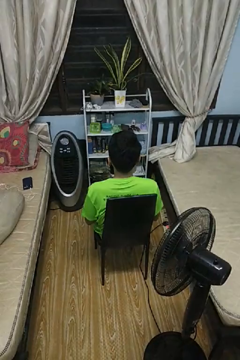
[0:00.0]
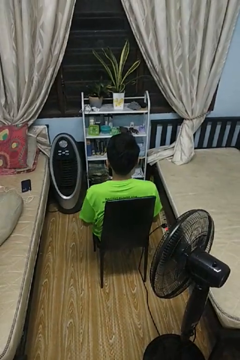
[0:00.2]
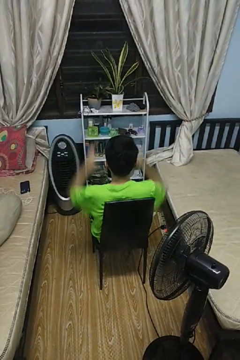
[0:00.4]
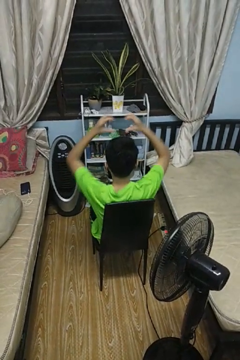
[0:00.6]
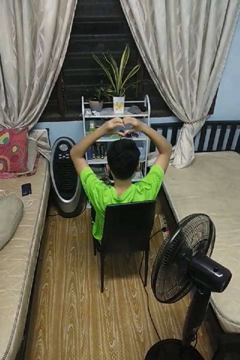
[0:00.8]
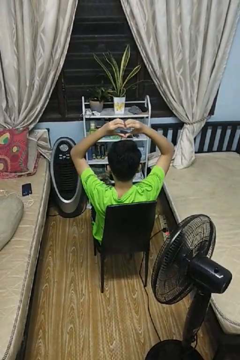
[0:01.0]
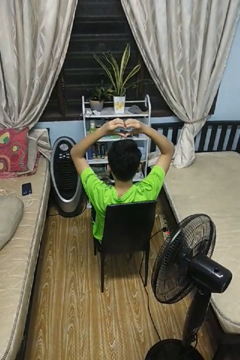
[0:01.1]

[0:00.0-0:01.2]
person gestures heart

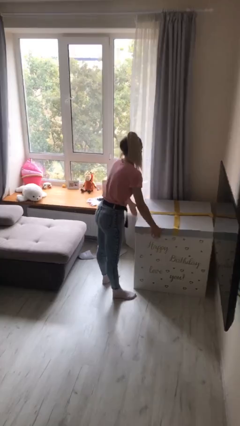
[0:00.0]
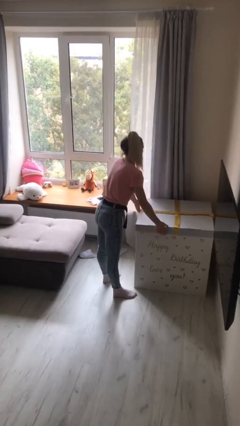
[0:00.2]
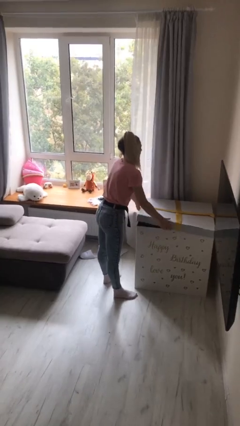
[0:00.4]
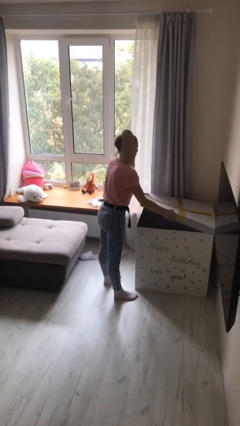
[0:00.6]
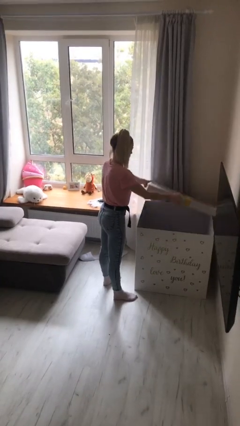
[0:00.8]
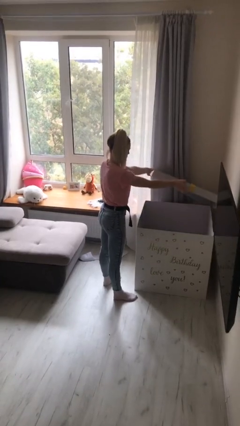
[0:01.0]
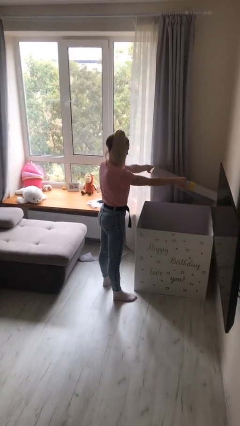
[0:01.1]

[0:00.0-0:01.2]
person opens box

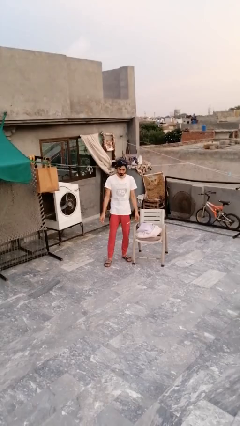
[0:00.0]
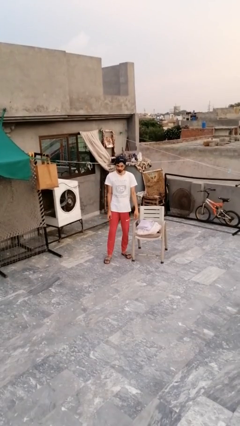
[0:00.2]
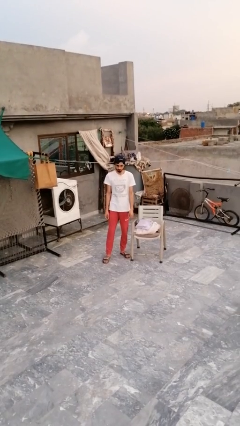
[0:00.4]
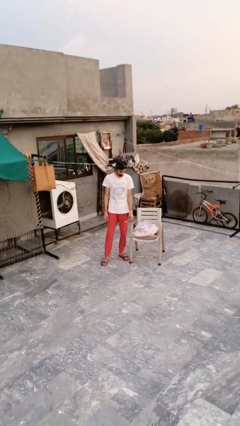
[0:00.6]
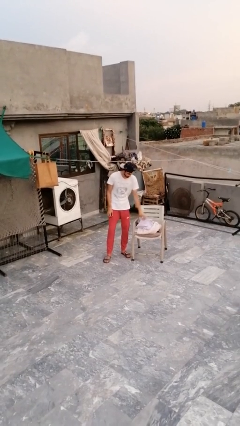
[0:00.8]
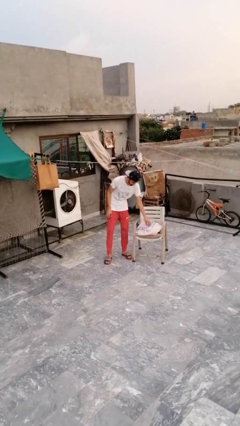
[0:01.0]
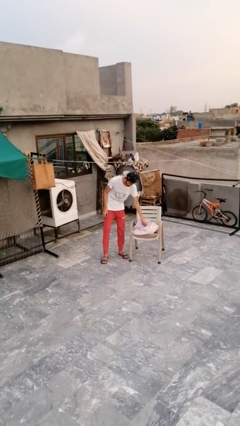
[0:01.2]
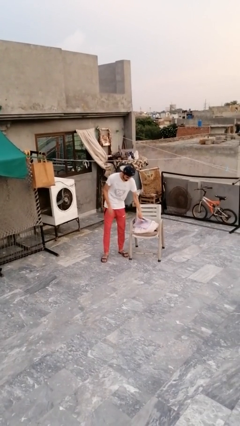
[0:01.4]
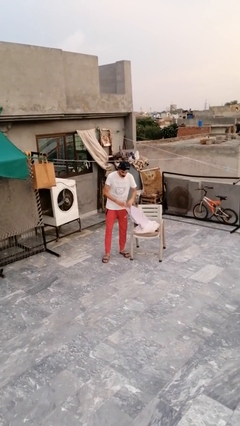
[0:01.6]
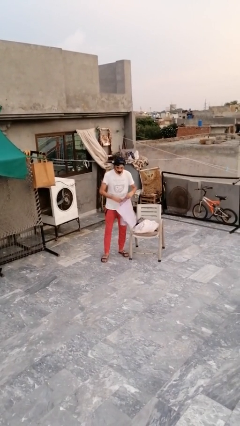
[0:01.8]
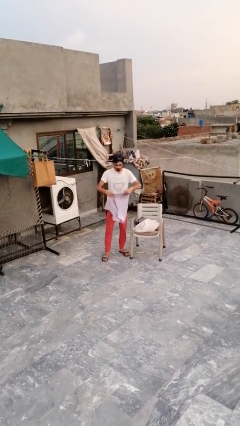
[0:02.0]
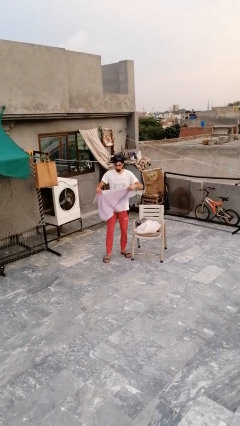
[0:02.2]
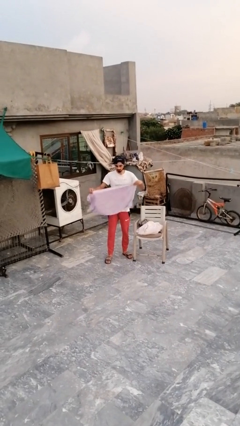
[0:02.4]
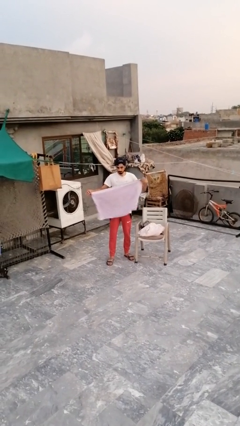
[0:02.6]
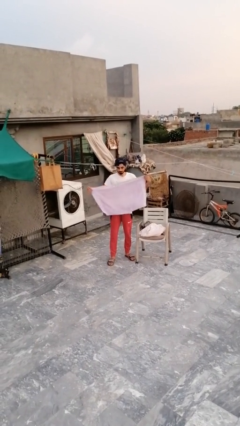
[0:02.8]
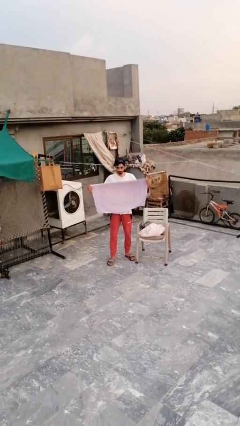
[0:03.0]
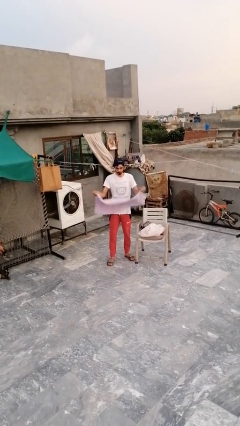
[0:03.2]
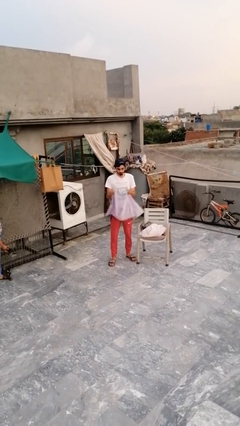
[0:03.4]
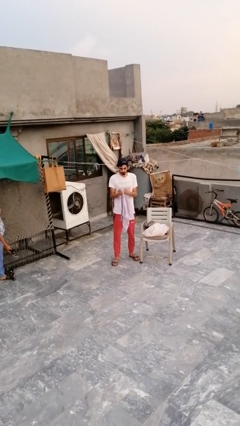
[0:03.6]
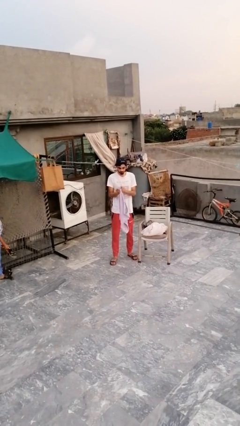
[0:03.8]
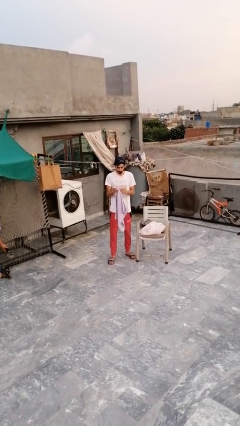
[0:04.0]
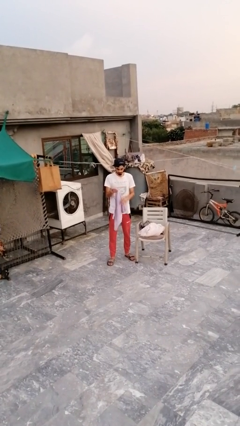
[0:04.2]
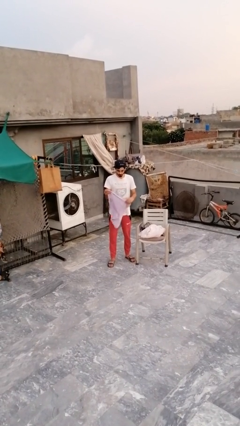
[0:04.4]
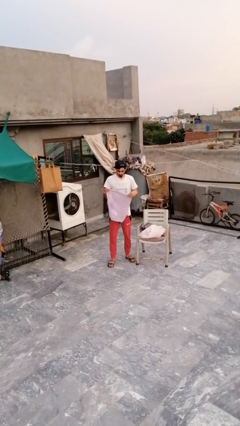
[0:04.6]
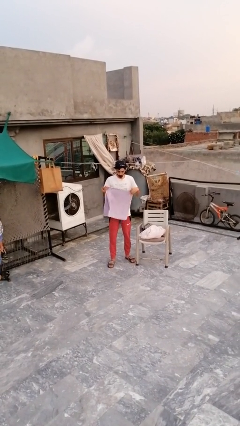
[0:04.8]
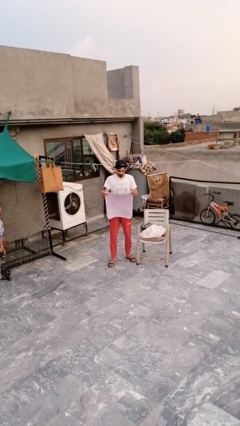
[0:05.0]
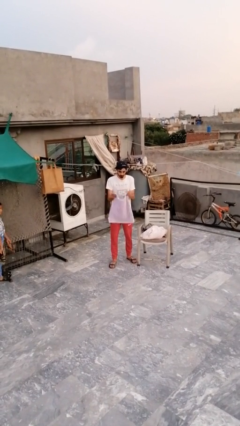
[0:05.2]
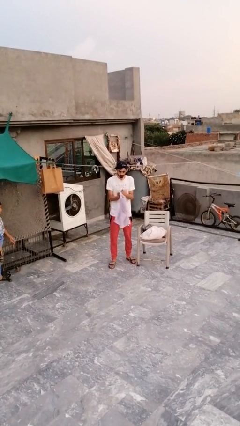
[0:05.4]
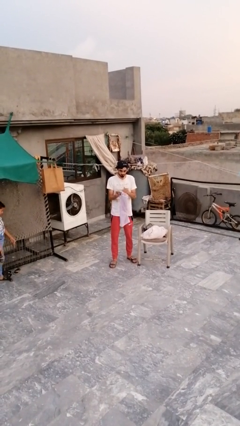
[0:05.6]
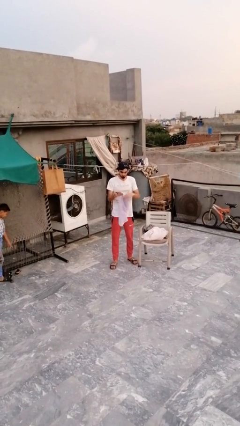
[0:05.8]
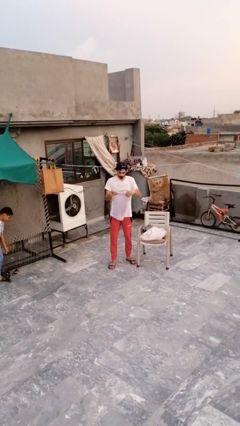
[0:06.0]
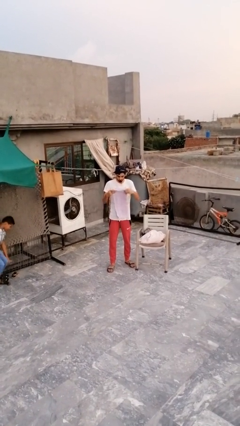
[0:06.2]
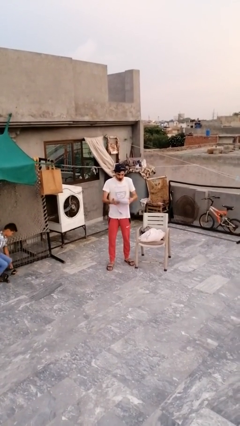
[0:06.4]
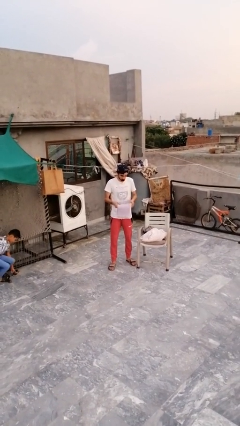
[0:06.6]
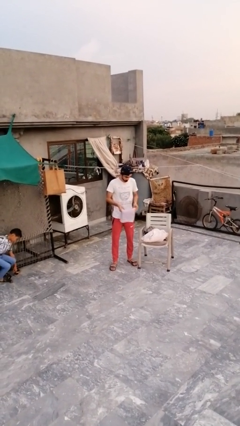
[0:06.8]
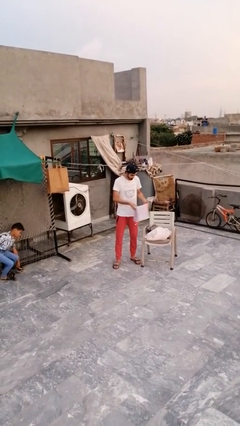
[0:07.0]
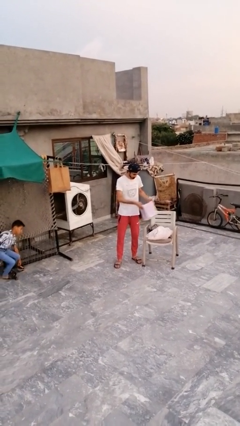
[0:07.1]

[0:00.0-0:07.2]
person folds towel

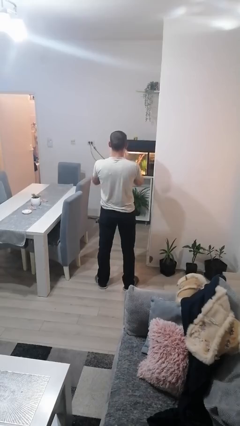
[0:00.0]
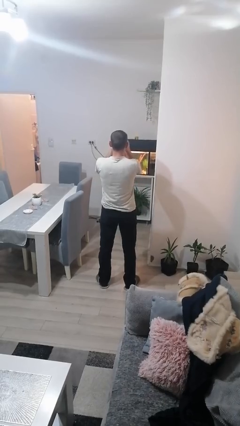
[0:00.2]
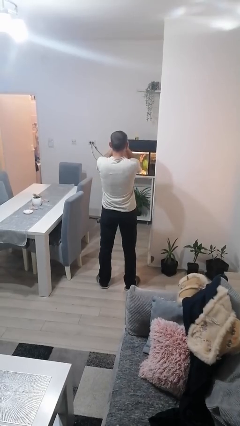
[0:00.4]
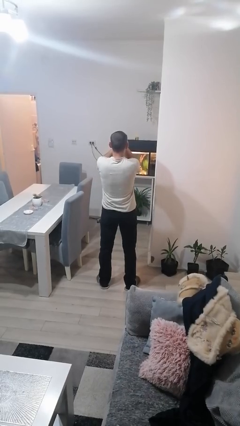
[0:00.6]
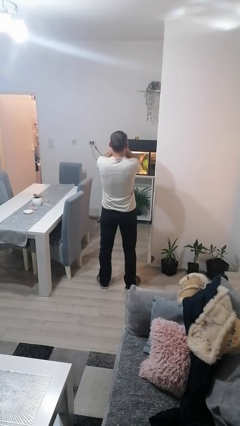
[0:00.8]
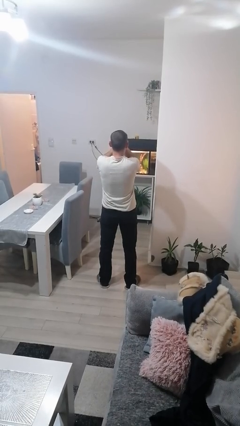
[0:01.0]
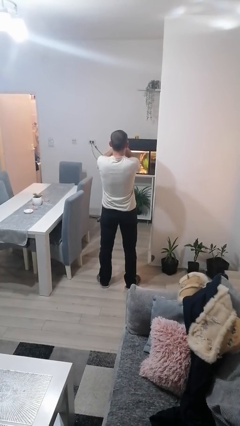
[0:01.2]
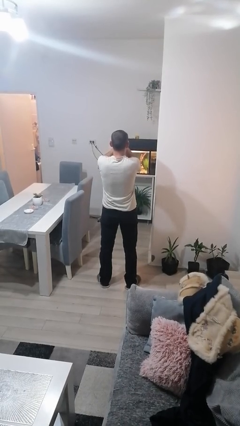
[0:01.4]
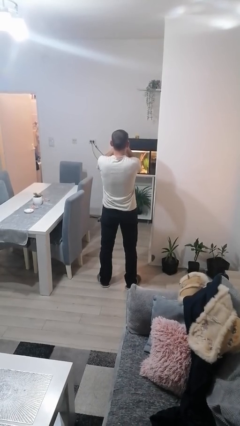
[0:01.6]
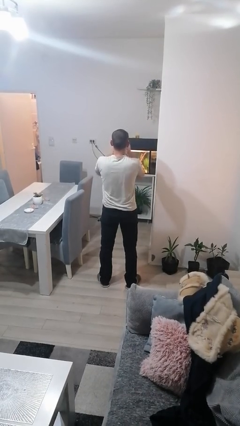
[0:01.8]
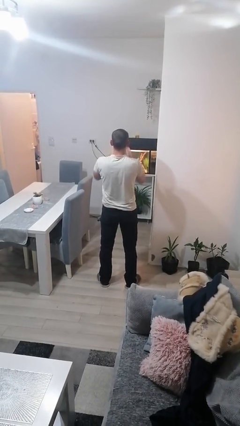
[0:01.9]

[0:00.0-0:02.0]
person covers face with hands

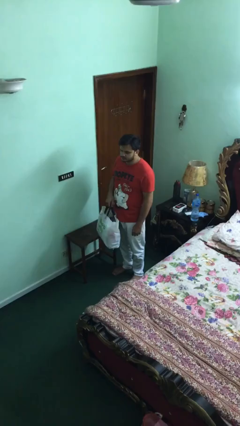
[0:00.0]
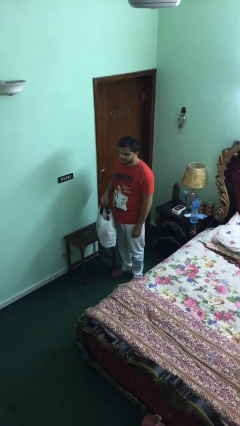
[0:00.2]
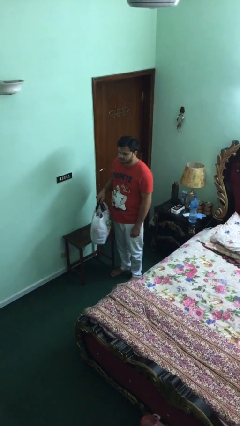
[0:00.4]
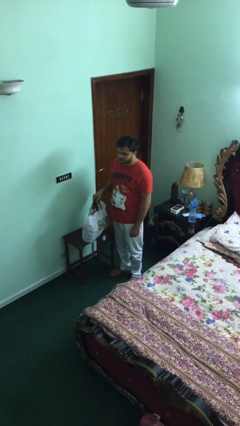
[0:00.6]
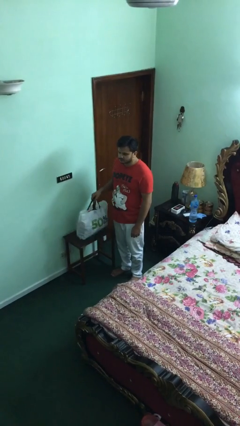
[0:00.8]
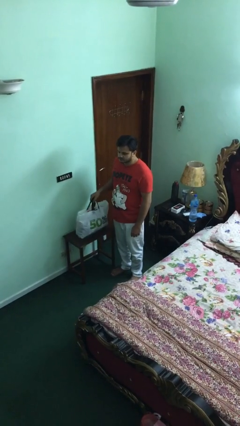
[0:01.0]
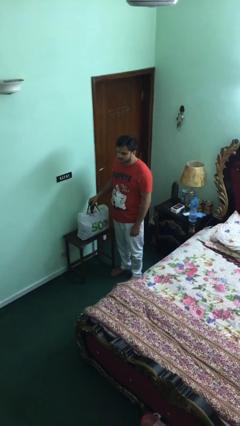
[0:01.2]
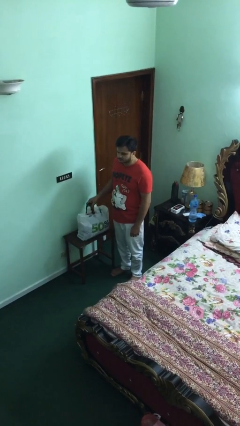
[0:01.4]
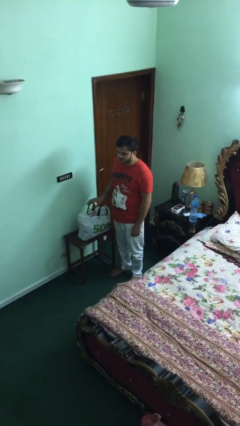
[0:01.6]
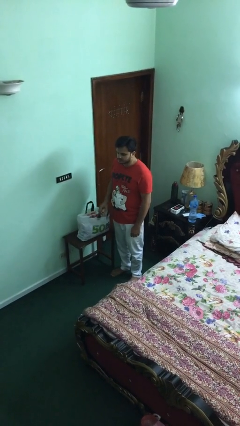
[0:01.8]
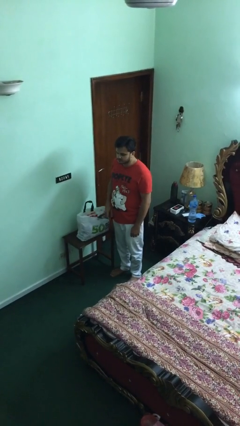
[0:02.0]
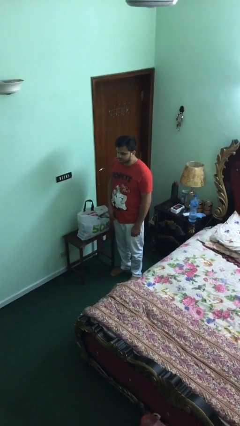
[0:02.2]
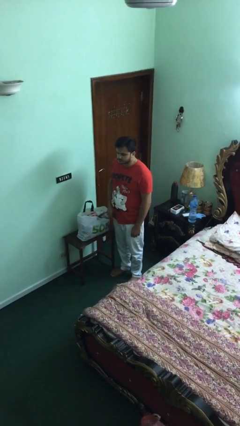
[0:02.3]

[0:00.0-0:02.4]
person puts down object on table

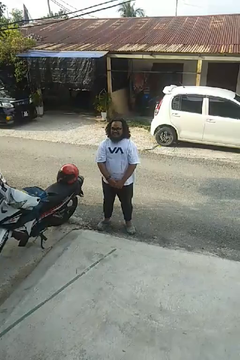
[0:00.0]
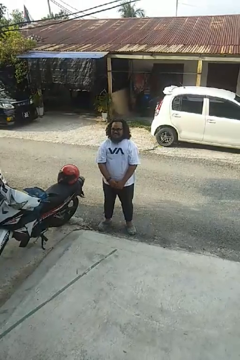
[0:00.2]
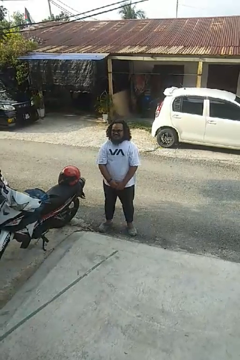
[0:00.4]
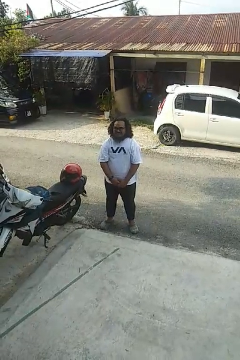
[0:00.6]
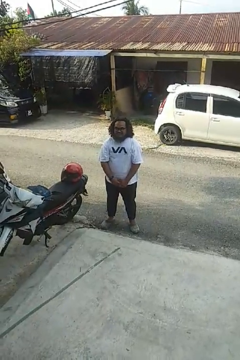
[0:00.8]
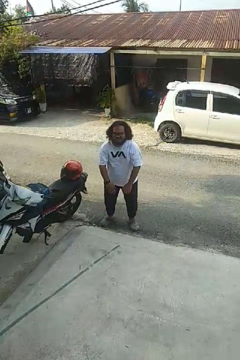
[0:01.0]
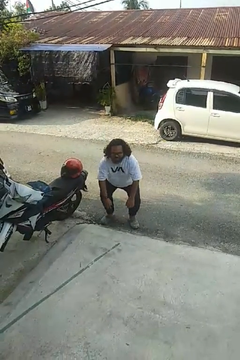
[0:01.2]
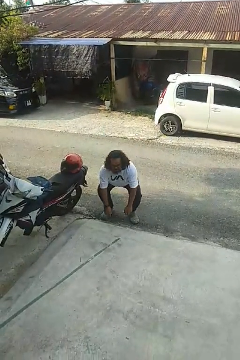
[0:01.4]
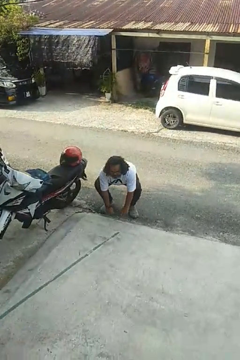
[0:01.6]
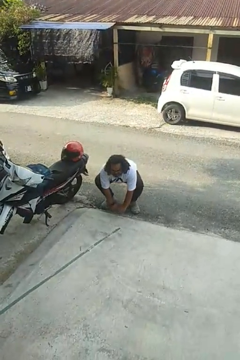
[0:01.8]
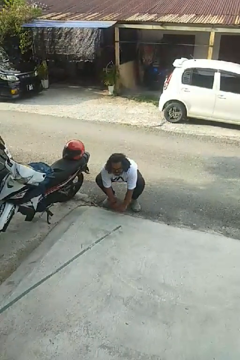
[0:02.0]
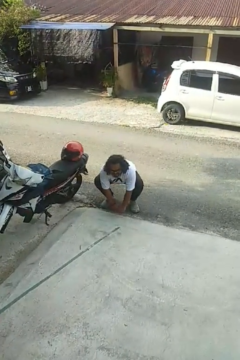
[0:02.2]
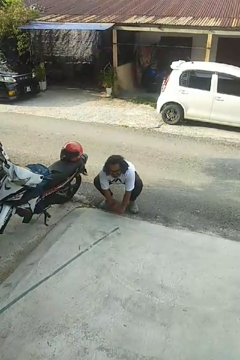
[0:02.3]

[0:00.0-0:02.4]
person squats

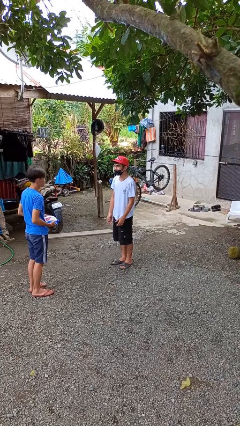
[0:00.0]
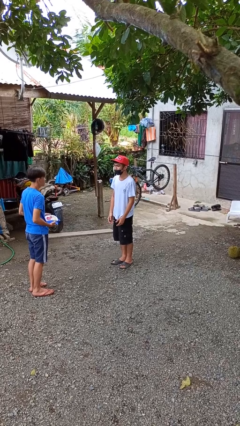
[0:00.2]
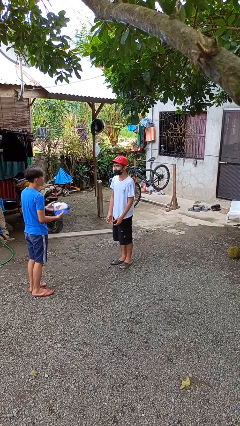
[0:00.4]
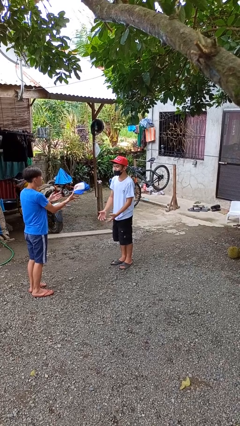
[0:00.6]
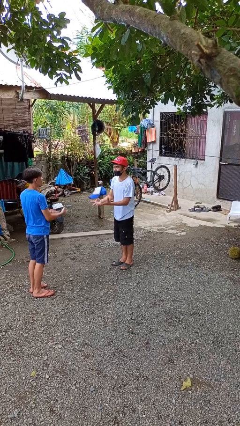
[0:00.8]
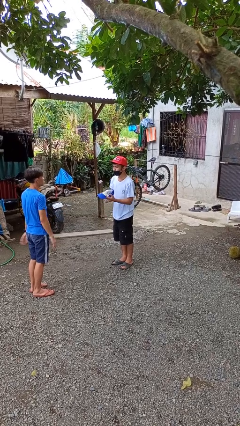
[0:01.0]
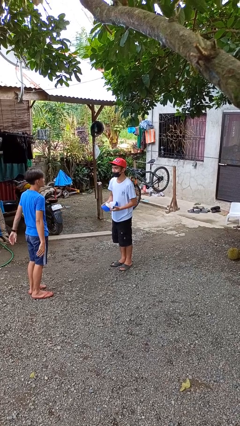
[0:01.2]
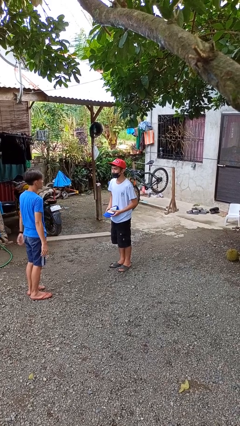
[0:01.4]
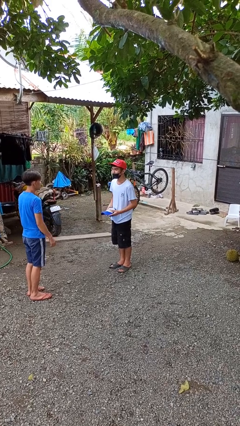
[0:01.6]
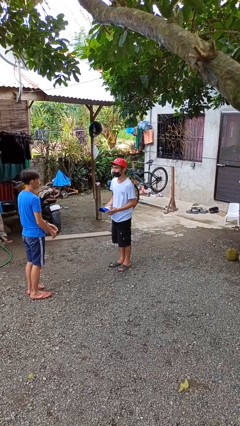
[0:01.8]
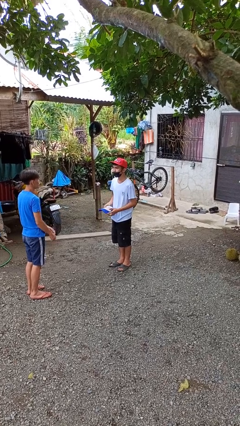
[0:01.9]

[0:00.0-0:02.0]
person catches object from person
